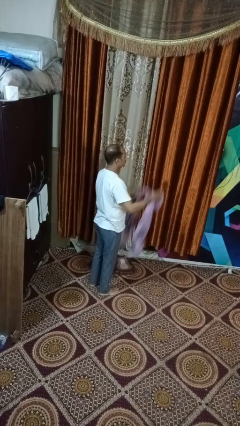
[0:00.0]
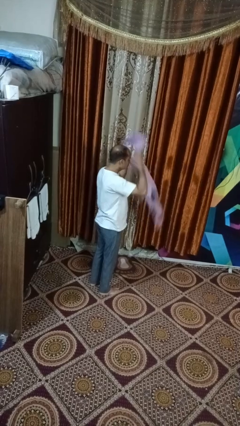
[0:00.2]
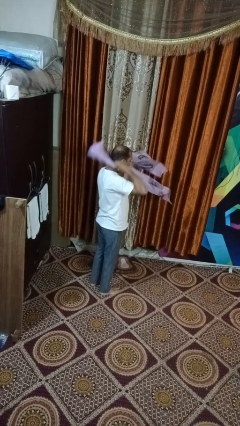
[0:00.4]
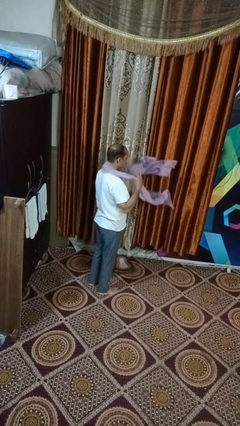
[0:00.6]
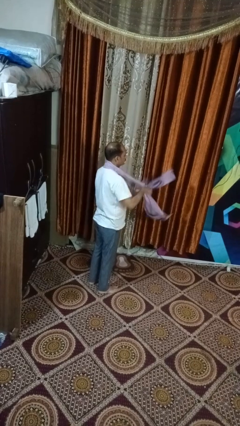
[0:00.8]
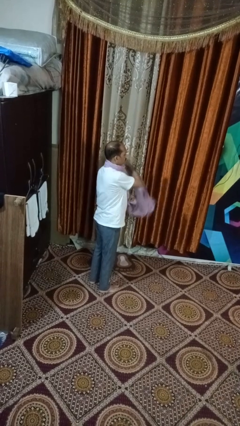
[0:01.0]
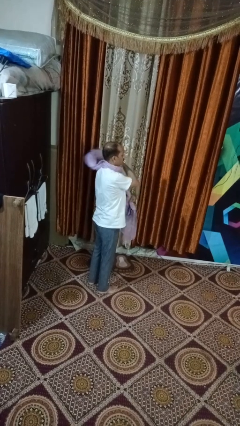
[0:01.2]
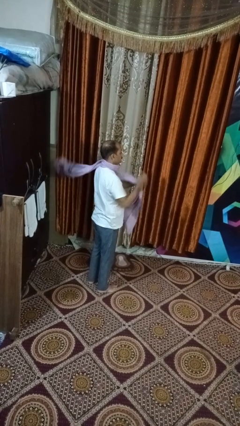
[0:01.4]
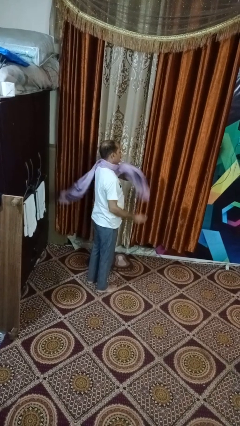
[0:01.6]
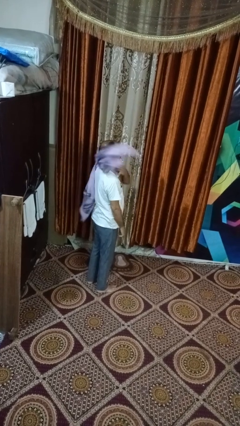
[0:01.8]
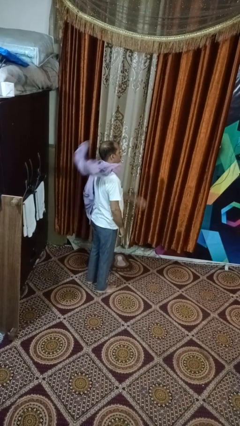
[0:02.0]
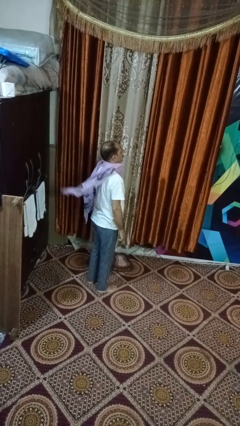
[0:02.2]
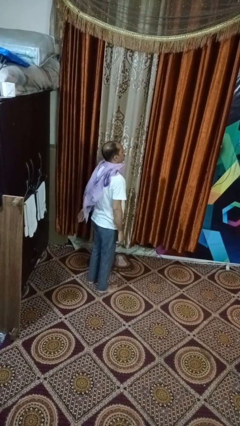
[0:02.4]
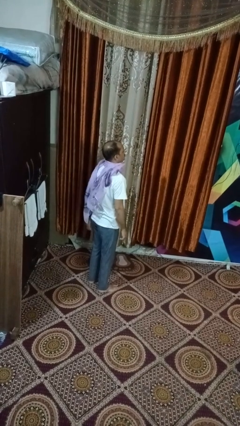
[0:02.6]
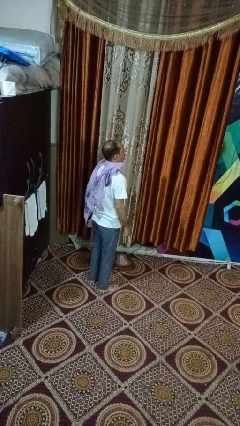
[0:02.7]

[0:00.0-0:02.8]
person puts on scarf

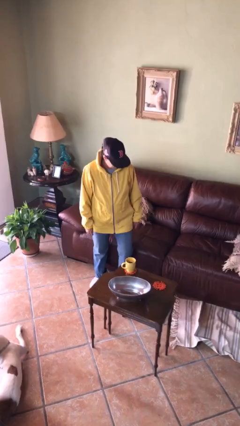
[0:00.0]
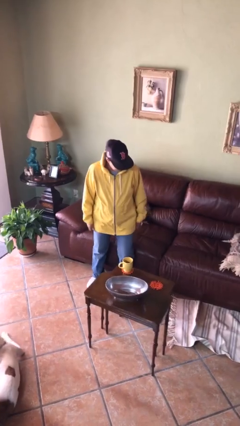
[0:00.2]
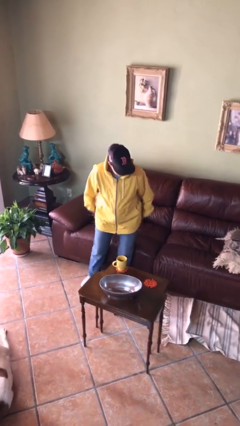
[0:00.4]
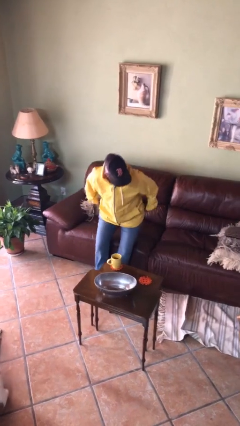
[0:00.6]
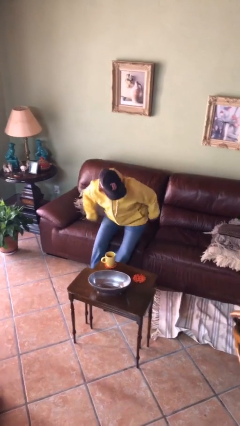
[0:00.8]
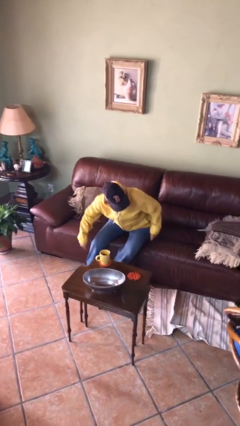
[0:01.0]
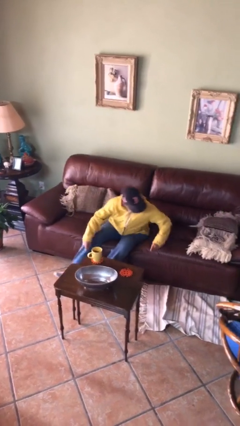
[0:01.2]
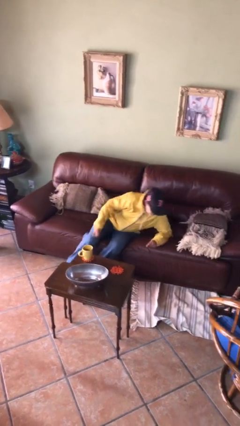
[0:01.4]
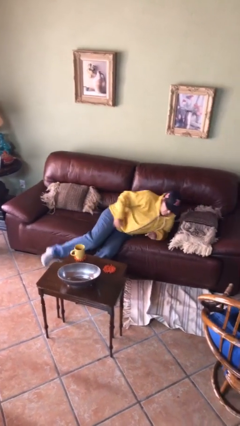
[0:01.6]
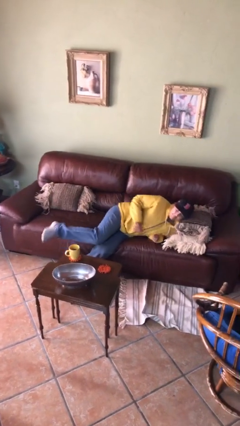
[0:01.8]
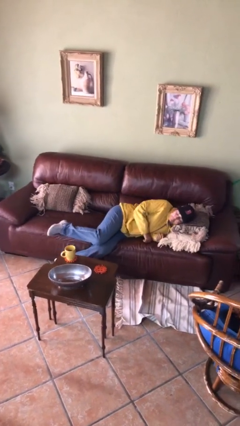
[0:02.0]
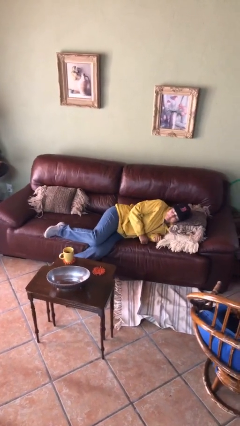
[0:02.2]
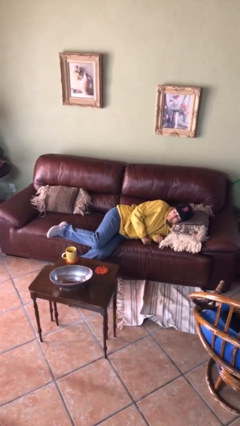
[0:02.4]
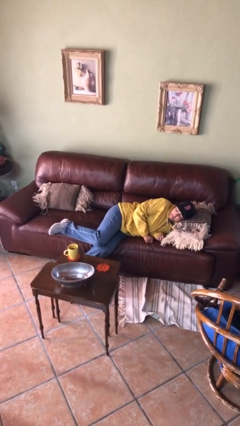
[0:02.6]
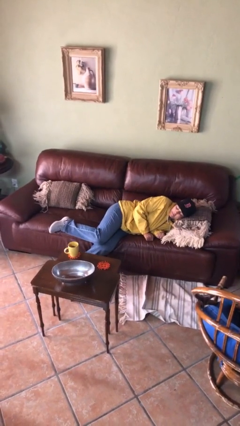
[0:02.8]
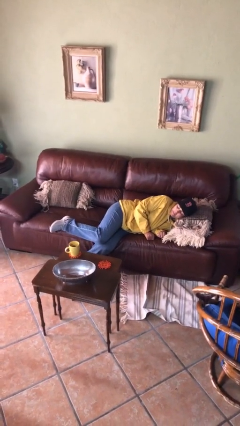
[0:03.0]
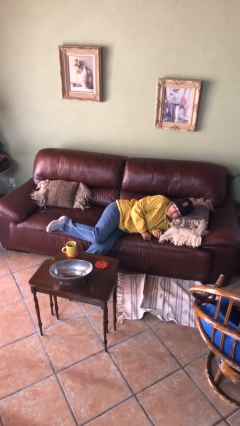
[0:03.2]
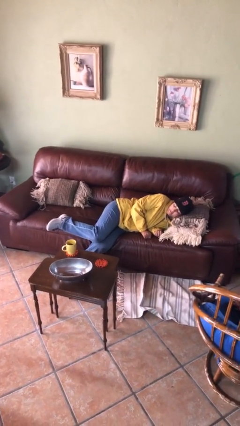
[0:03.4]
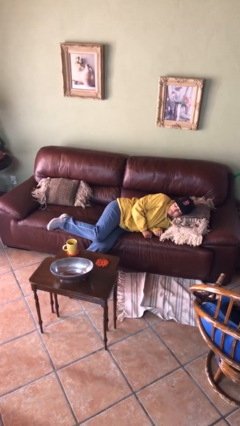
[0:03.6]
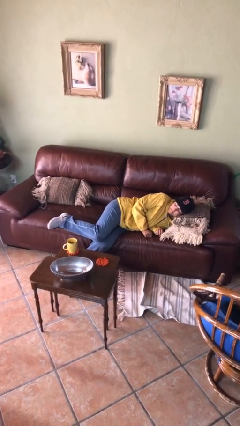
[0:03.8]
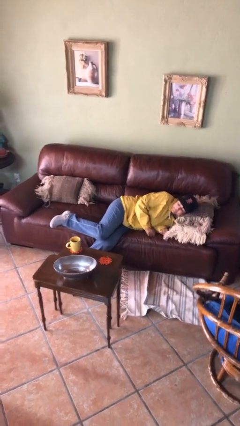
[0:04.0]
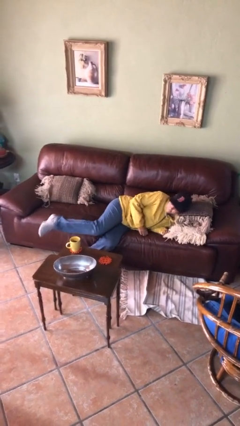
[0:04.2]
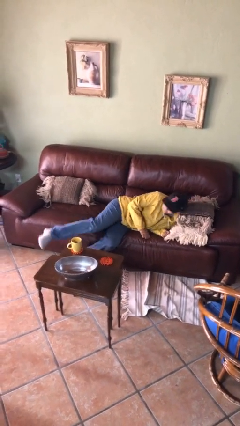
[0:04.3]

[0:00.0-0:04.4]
person lies down on couch

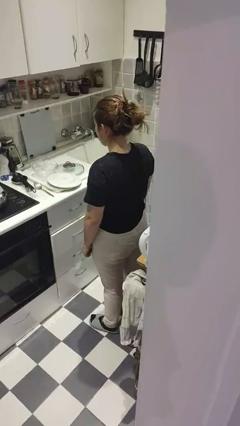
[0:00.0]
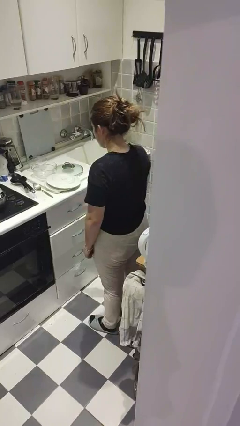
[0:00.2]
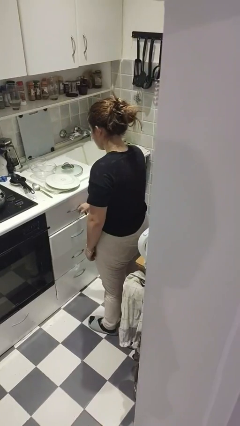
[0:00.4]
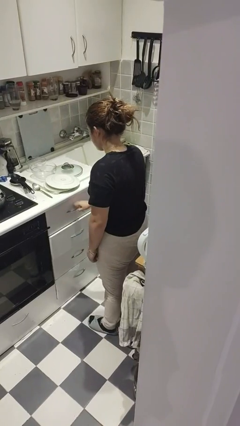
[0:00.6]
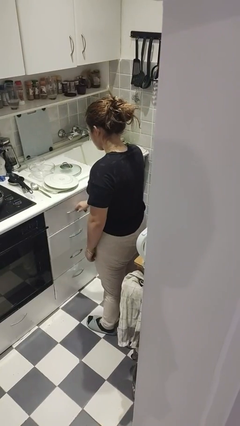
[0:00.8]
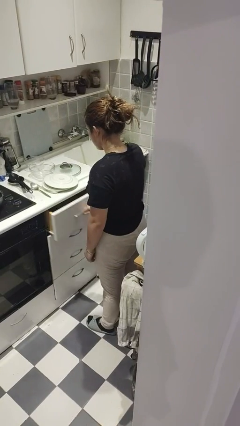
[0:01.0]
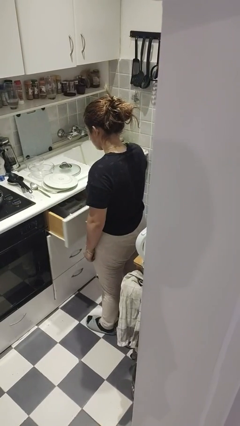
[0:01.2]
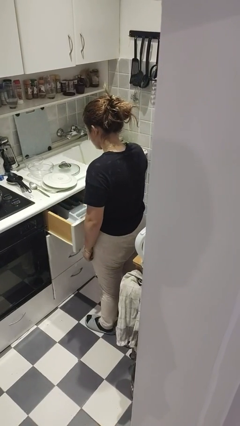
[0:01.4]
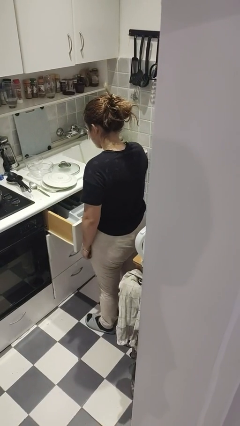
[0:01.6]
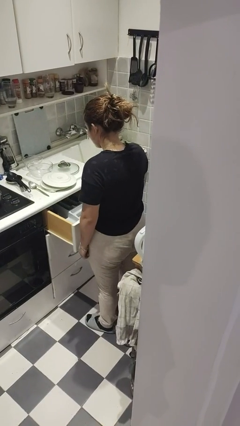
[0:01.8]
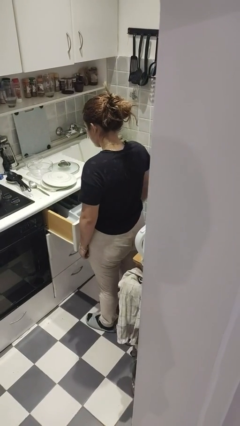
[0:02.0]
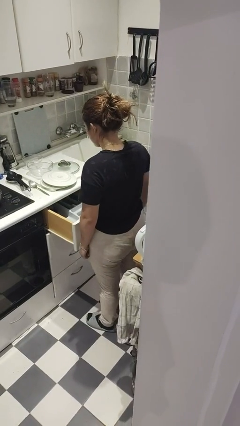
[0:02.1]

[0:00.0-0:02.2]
person opens kitchen drawer

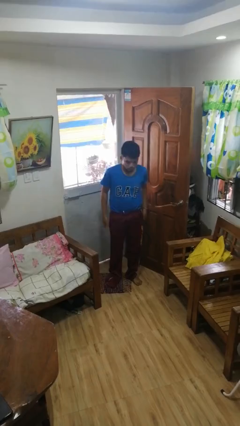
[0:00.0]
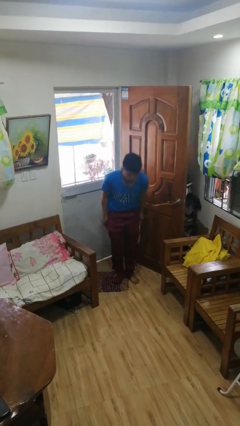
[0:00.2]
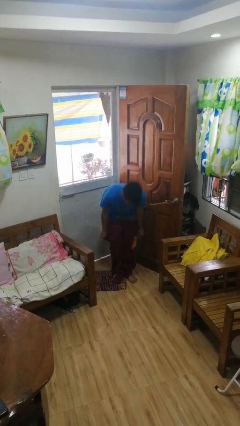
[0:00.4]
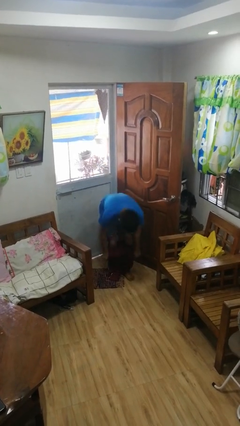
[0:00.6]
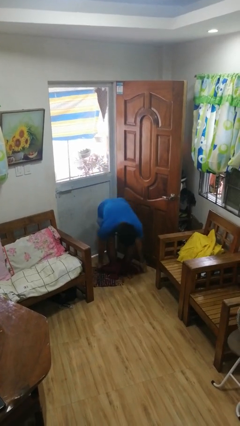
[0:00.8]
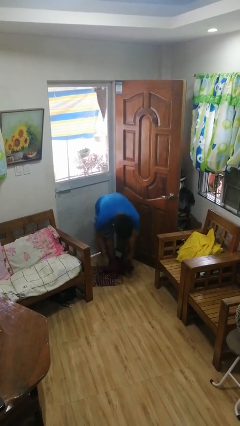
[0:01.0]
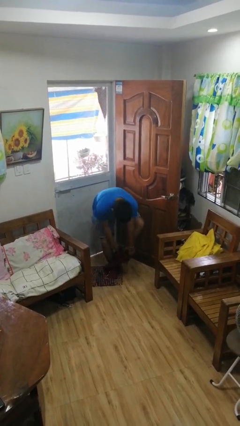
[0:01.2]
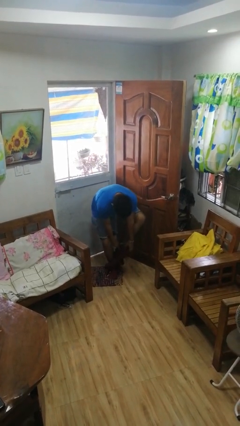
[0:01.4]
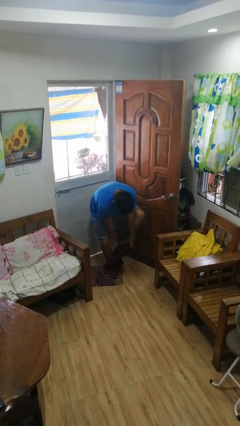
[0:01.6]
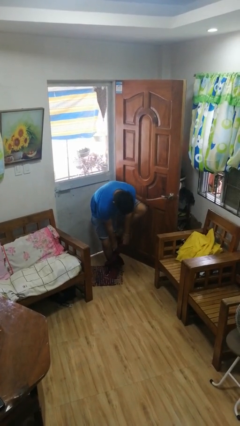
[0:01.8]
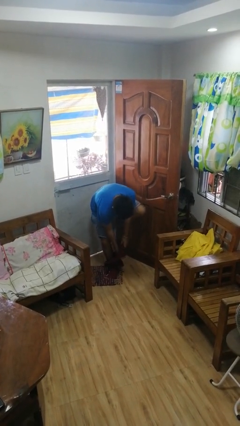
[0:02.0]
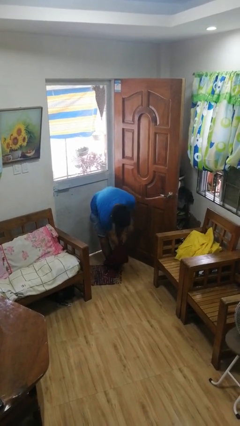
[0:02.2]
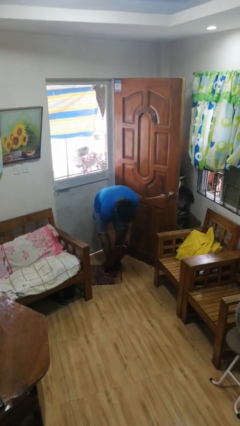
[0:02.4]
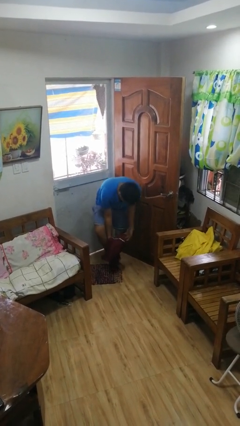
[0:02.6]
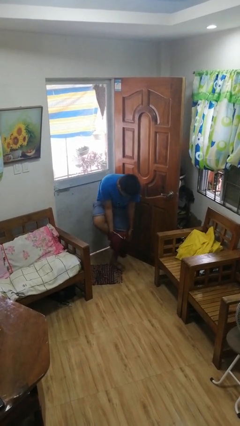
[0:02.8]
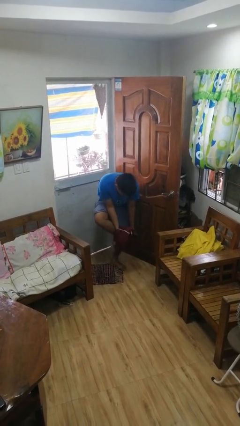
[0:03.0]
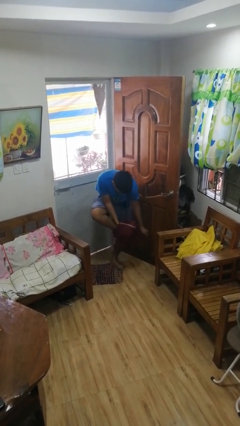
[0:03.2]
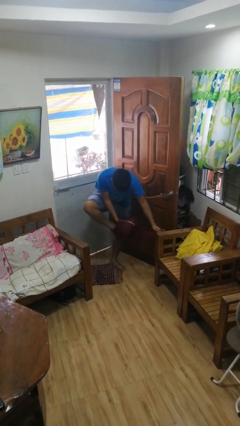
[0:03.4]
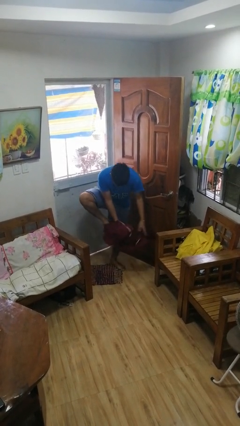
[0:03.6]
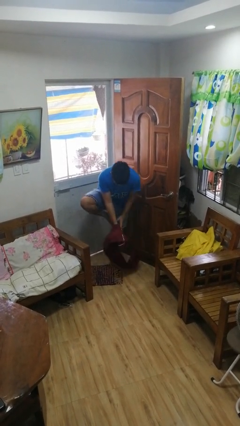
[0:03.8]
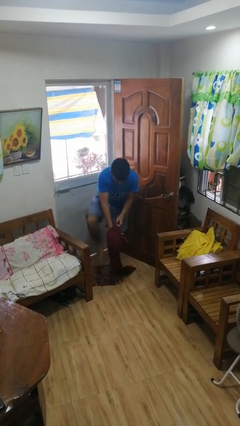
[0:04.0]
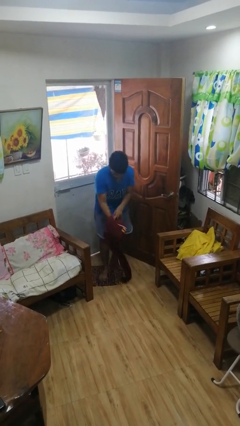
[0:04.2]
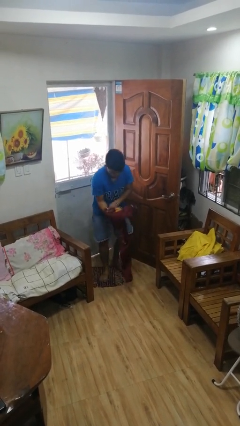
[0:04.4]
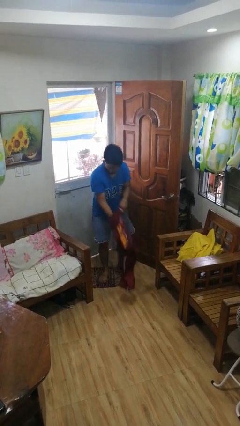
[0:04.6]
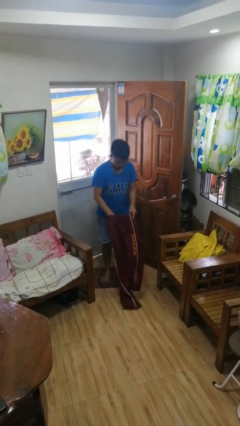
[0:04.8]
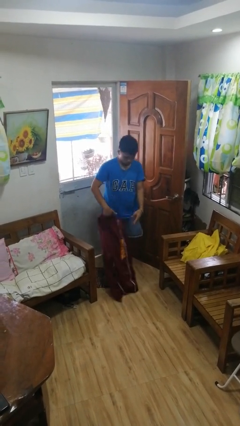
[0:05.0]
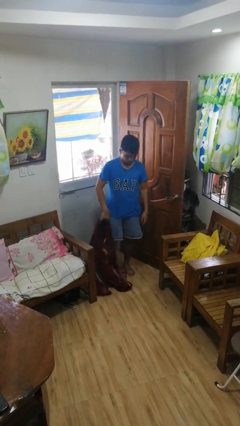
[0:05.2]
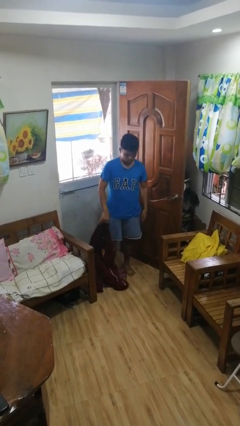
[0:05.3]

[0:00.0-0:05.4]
person takes off pants

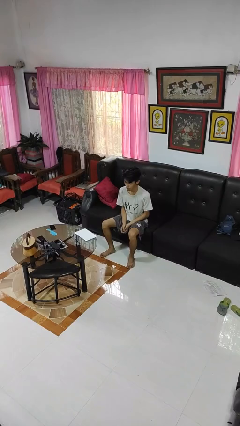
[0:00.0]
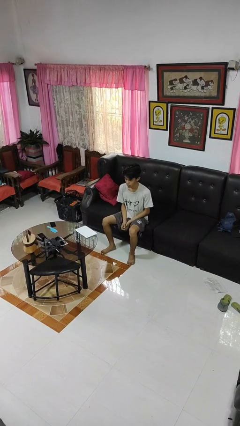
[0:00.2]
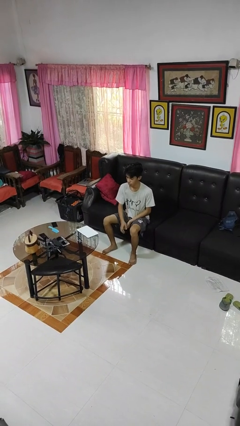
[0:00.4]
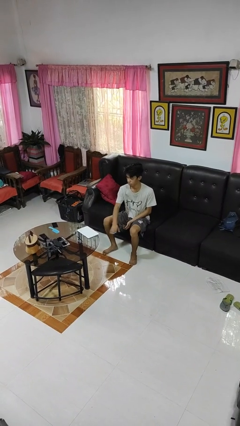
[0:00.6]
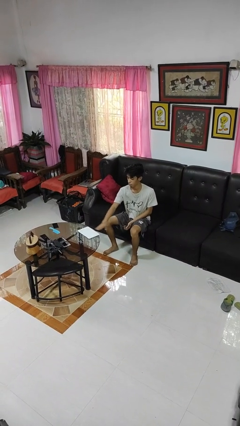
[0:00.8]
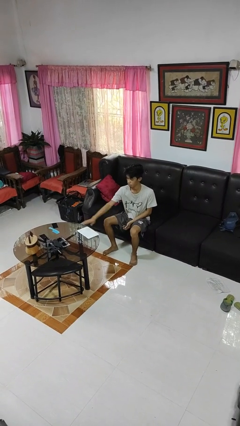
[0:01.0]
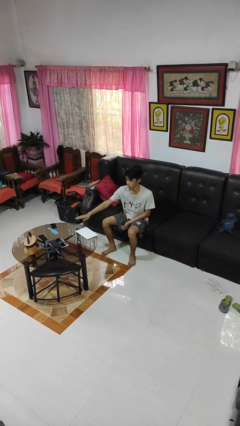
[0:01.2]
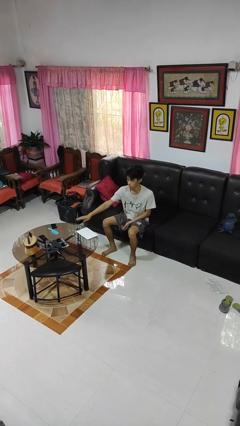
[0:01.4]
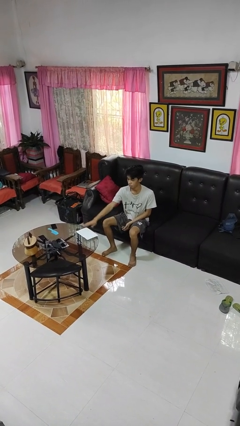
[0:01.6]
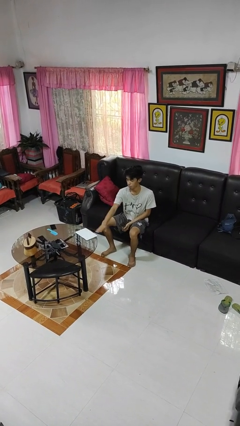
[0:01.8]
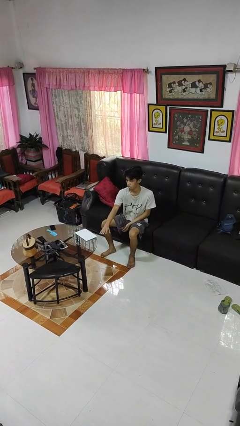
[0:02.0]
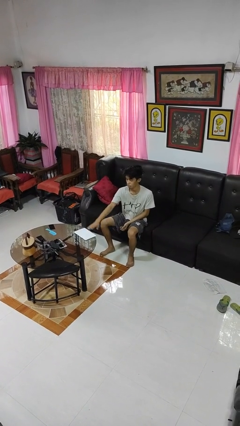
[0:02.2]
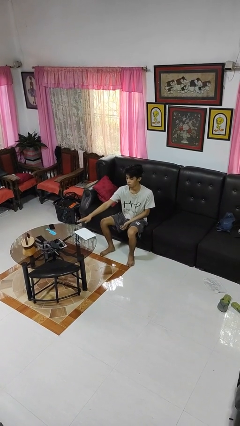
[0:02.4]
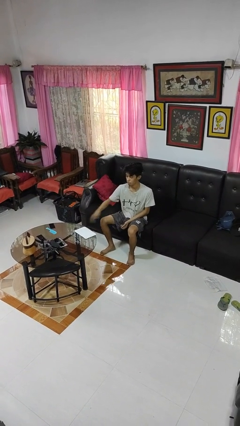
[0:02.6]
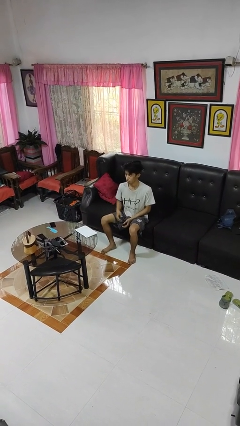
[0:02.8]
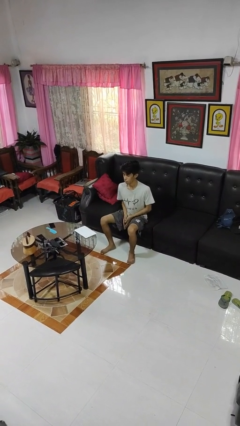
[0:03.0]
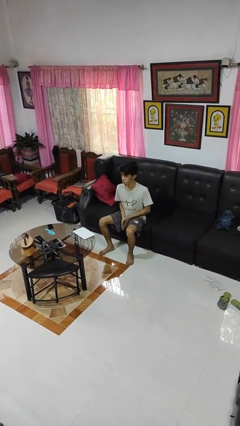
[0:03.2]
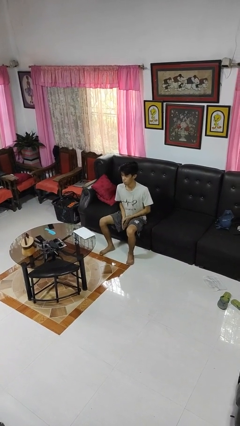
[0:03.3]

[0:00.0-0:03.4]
person waves hand over object
